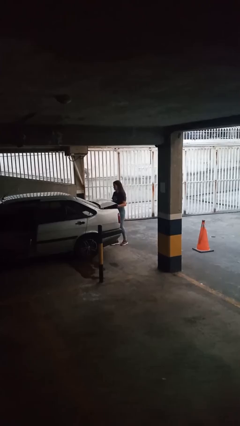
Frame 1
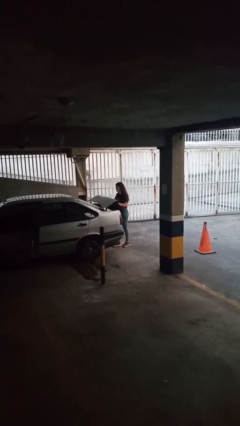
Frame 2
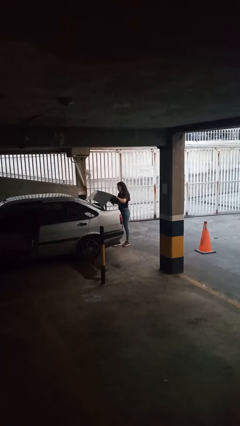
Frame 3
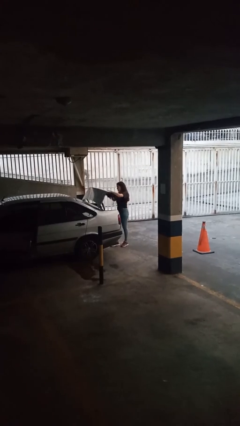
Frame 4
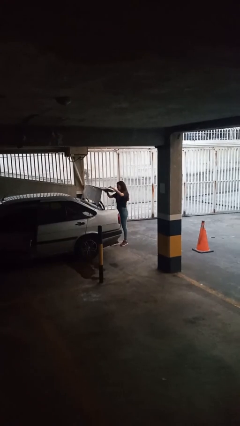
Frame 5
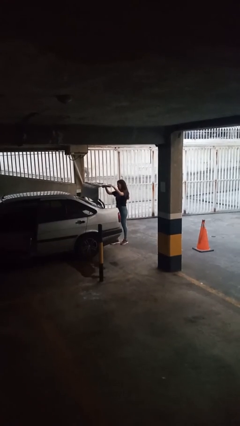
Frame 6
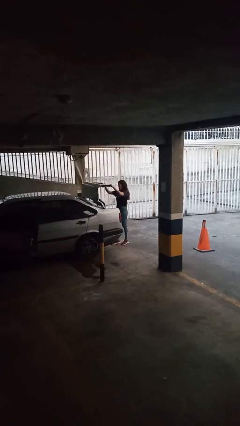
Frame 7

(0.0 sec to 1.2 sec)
person opens car trunk

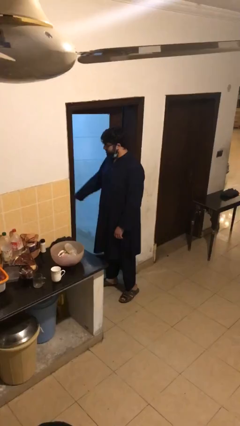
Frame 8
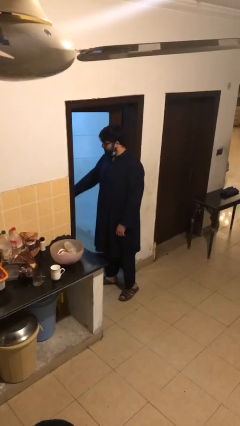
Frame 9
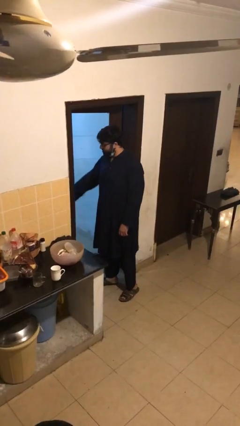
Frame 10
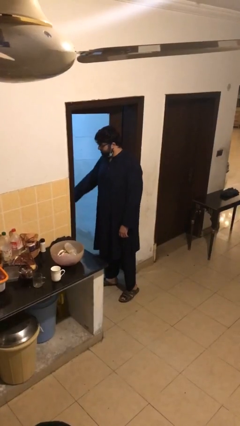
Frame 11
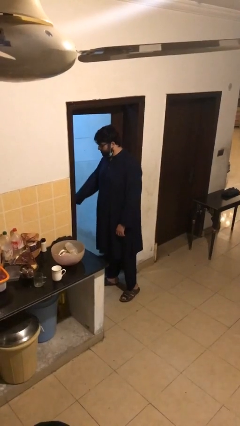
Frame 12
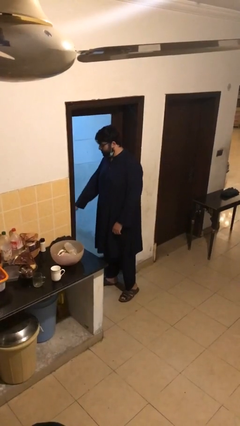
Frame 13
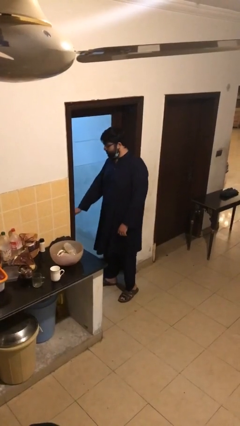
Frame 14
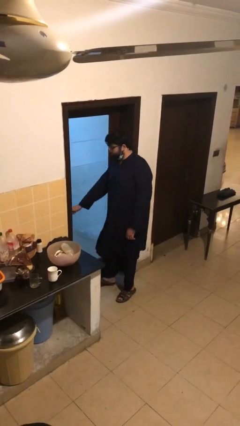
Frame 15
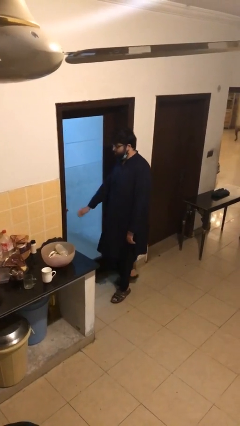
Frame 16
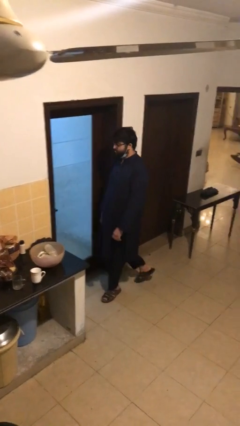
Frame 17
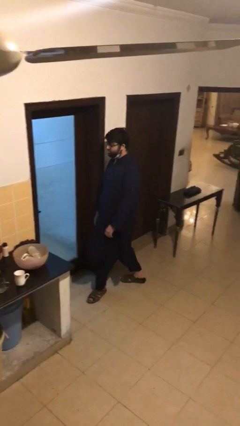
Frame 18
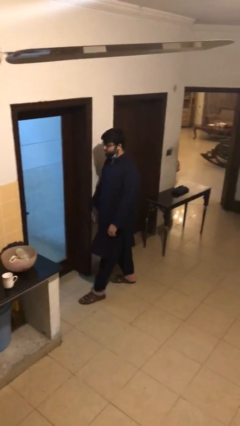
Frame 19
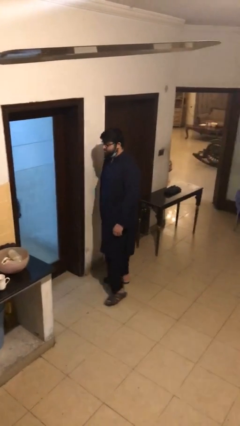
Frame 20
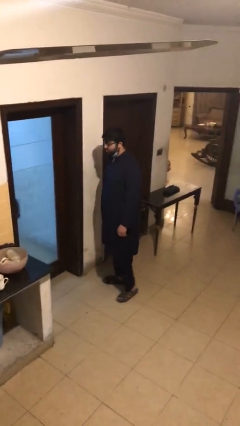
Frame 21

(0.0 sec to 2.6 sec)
person closes facility door

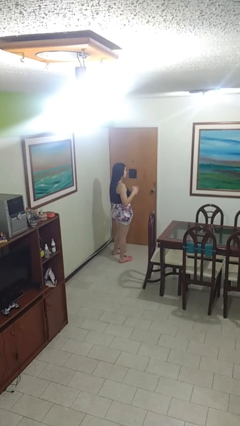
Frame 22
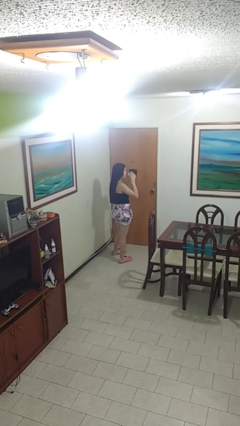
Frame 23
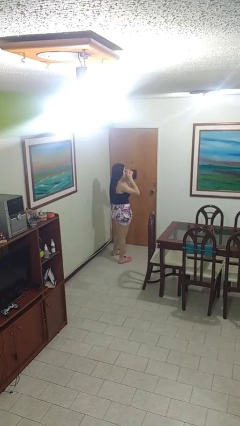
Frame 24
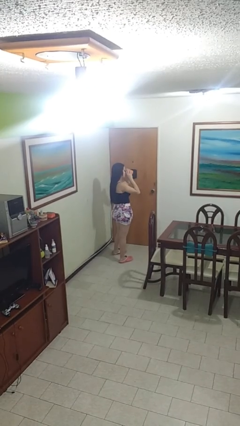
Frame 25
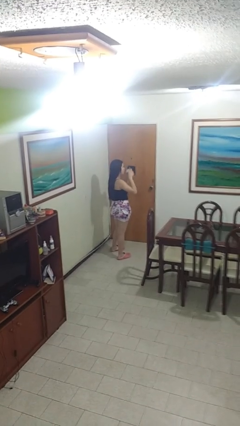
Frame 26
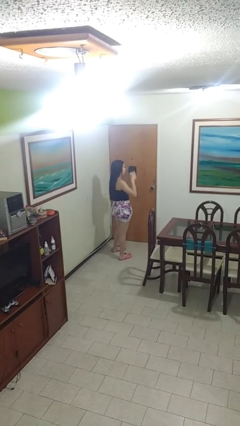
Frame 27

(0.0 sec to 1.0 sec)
person drinks from mug

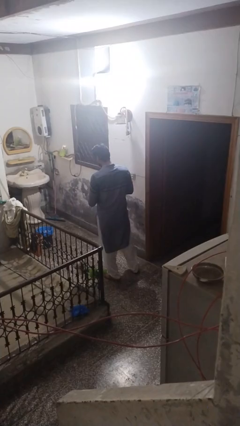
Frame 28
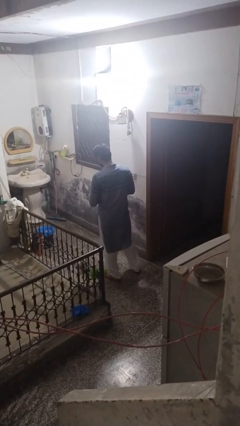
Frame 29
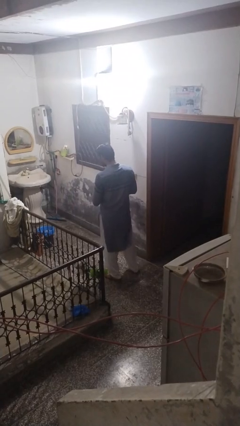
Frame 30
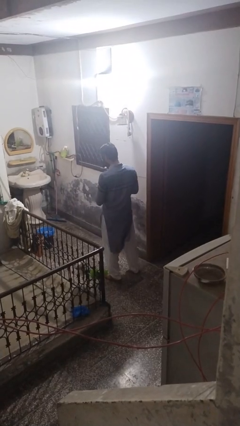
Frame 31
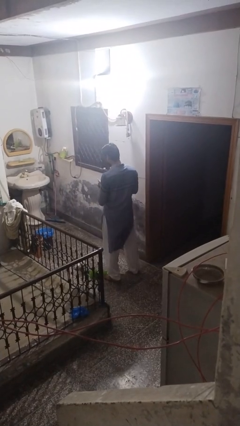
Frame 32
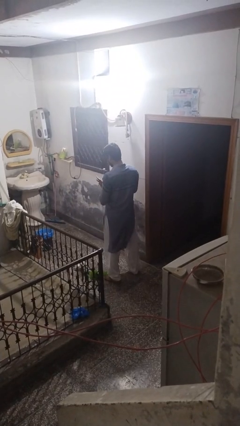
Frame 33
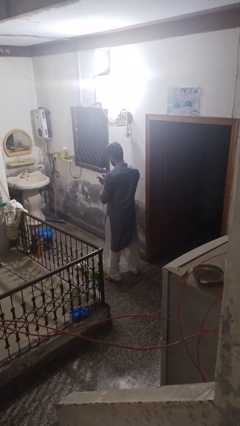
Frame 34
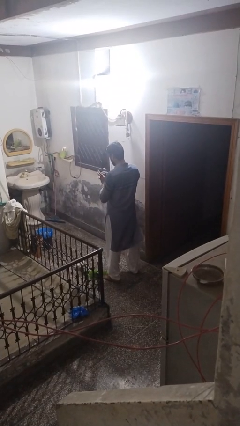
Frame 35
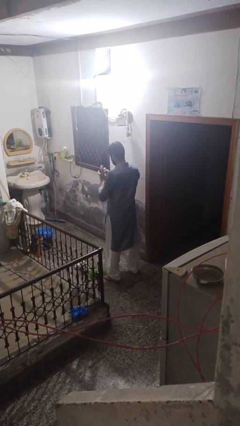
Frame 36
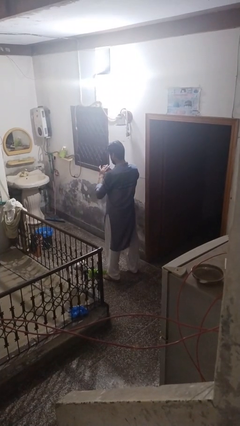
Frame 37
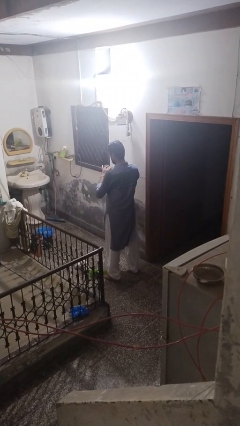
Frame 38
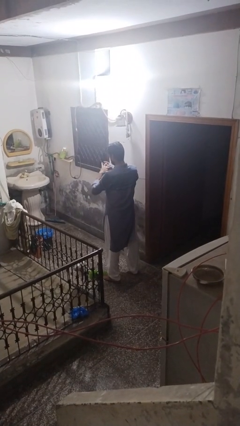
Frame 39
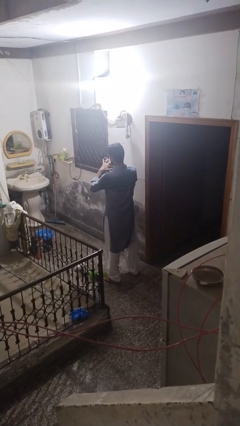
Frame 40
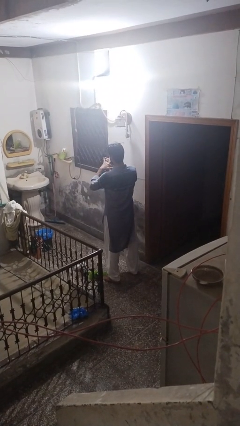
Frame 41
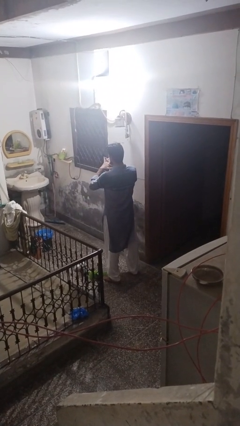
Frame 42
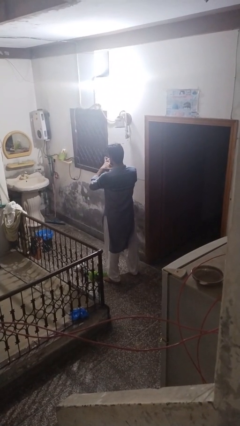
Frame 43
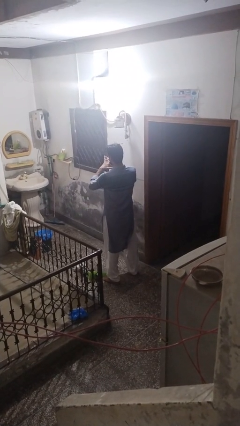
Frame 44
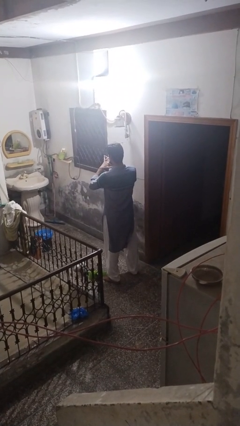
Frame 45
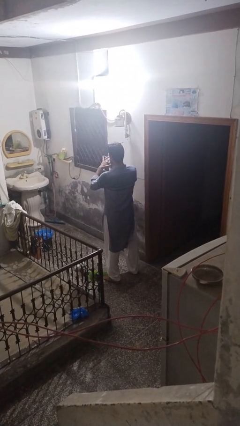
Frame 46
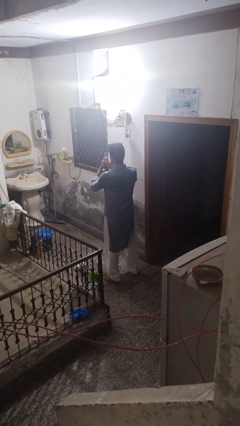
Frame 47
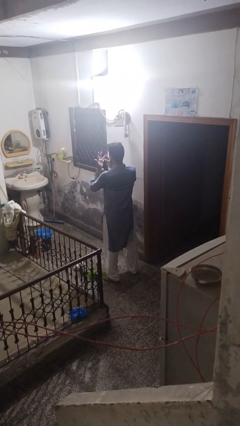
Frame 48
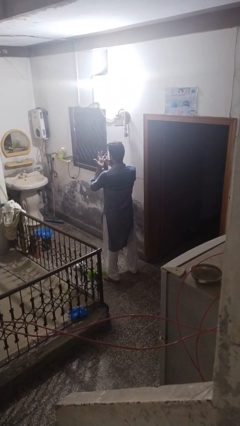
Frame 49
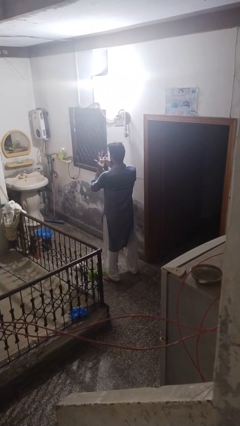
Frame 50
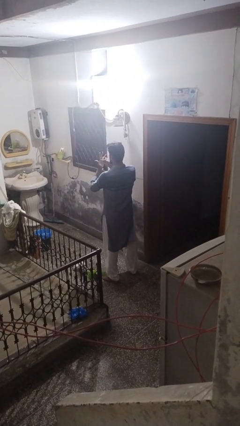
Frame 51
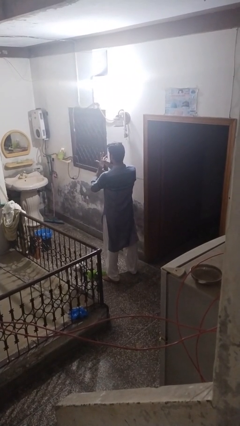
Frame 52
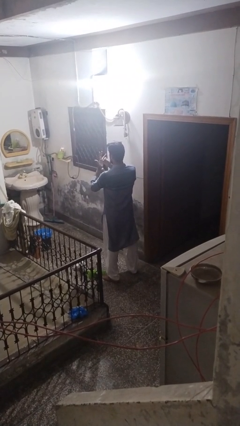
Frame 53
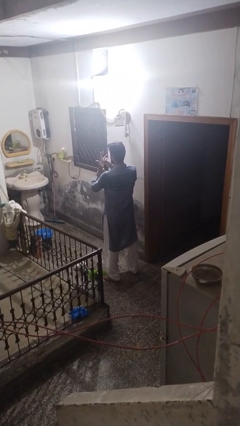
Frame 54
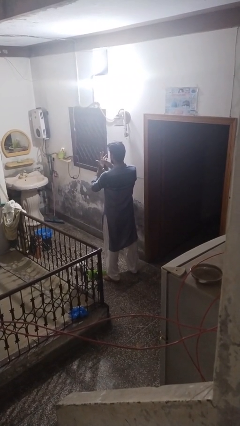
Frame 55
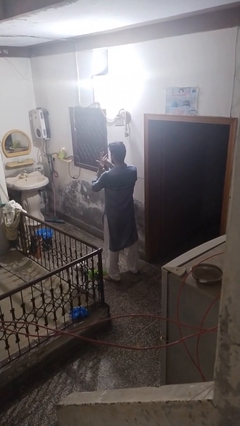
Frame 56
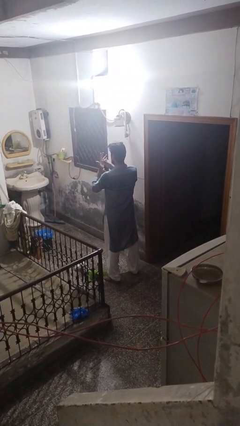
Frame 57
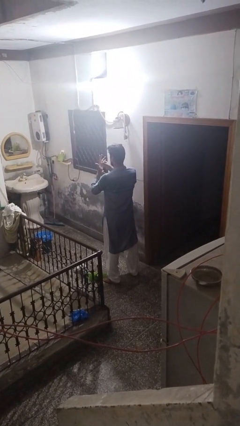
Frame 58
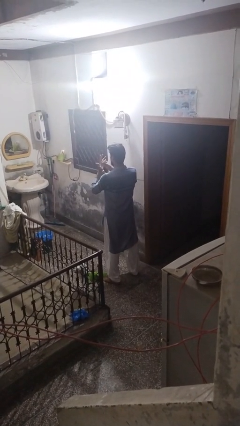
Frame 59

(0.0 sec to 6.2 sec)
person puts on ring

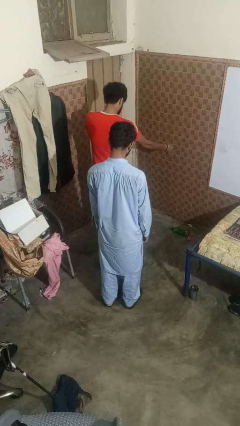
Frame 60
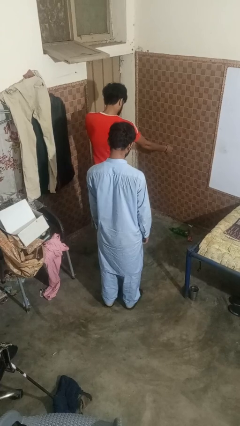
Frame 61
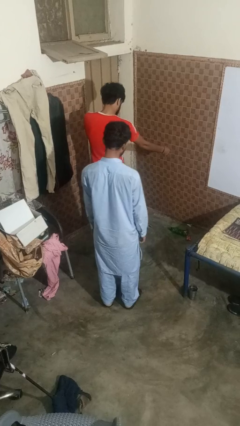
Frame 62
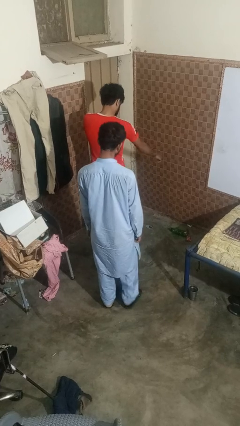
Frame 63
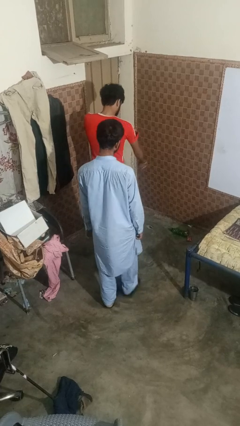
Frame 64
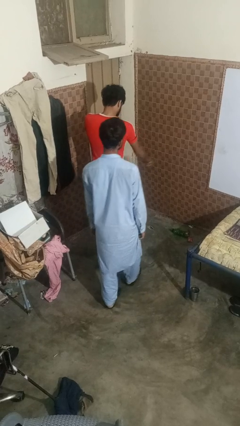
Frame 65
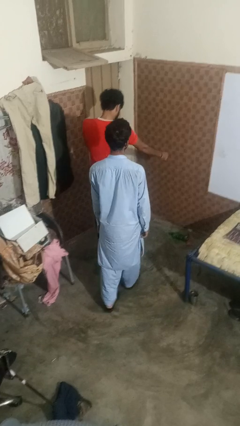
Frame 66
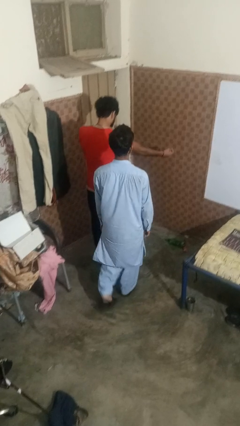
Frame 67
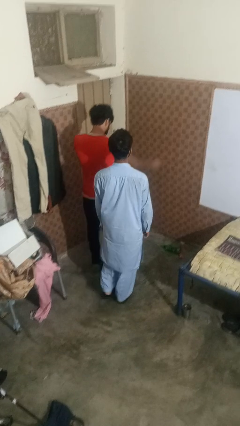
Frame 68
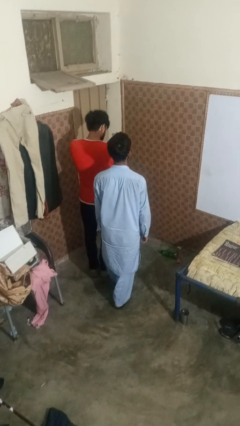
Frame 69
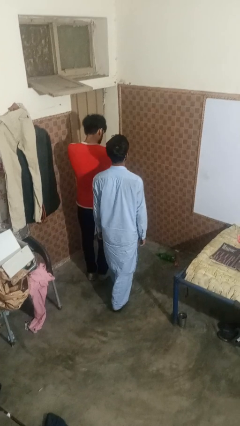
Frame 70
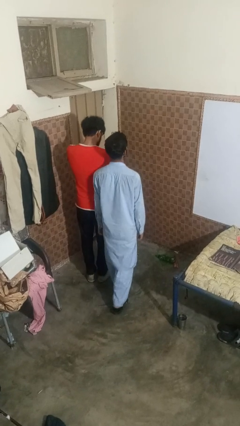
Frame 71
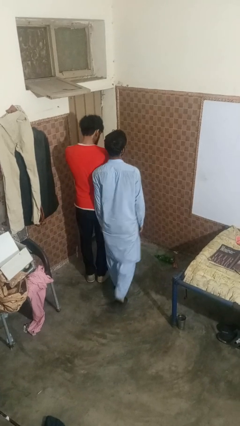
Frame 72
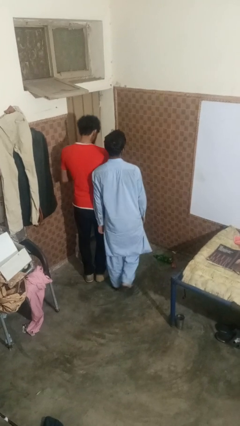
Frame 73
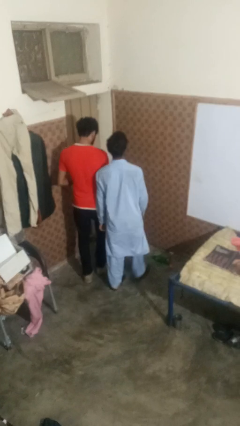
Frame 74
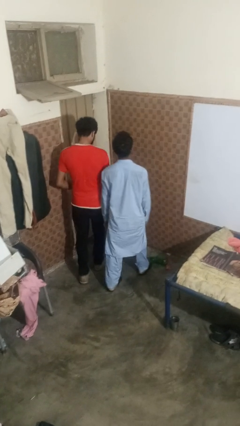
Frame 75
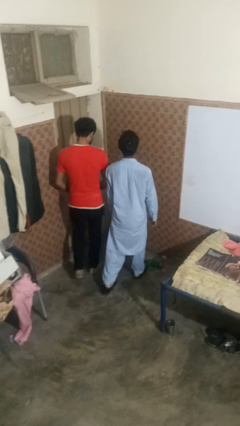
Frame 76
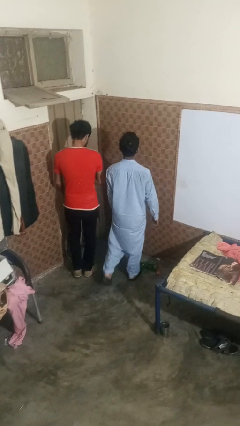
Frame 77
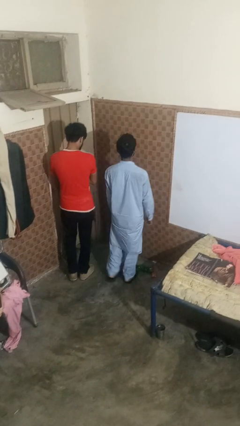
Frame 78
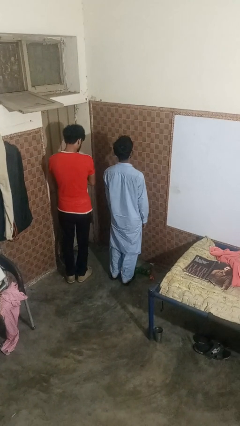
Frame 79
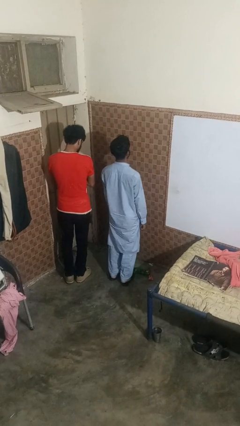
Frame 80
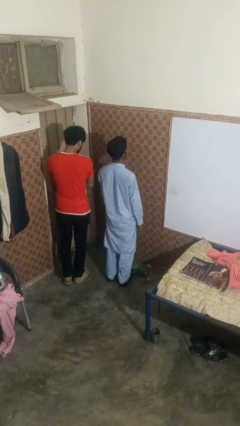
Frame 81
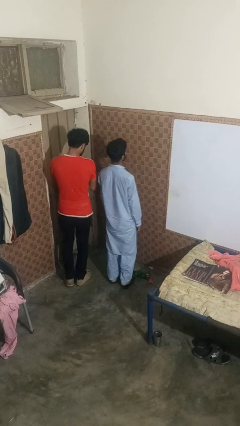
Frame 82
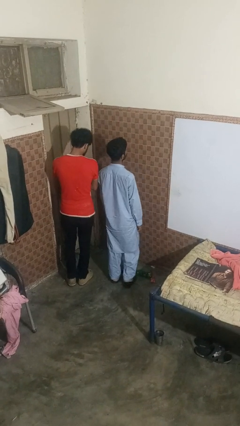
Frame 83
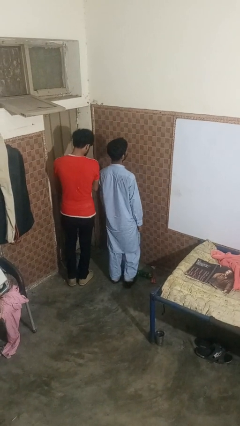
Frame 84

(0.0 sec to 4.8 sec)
person bumps into person

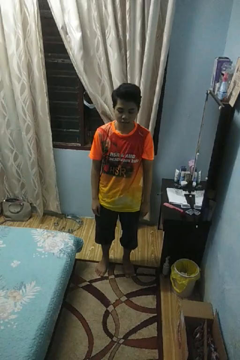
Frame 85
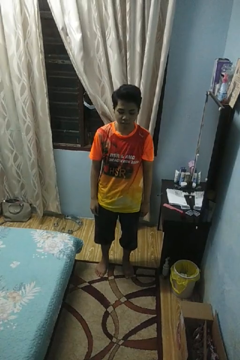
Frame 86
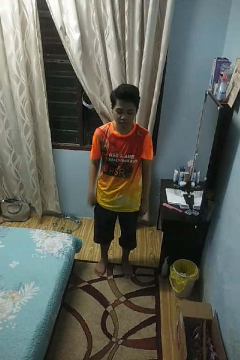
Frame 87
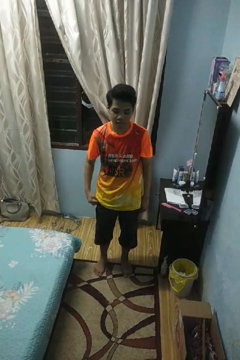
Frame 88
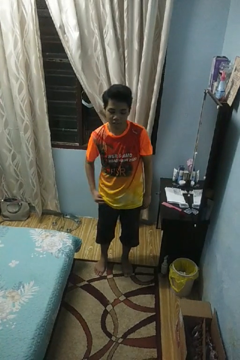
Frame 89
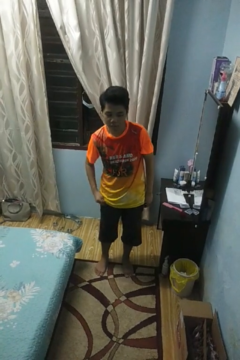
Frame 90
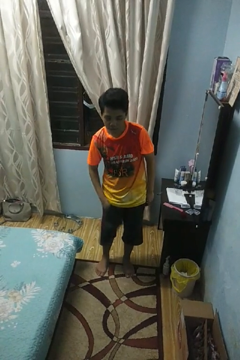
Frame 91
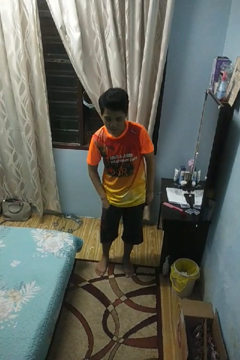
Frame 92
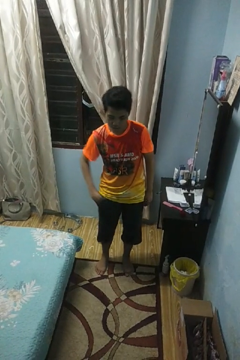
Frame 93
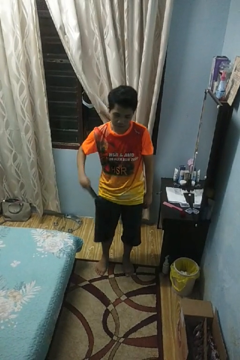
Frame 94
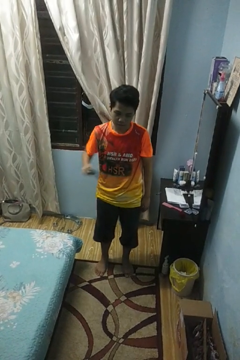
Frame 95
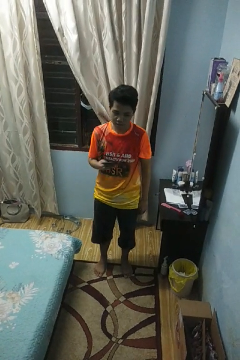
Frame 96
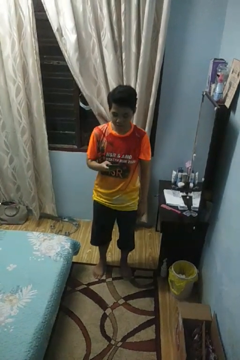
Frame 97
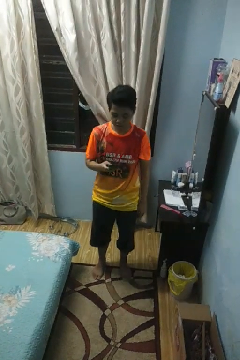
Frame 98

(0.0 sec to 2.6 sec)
person takes phone from pocket
